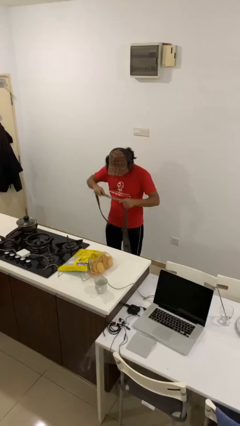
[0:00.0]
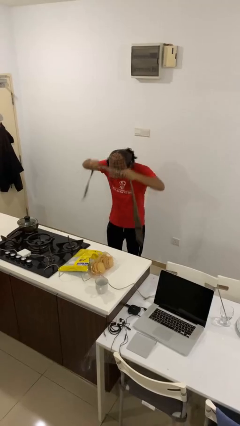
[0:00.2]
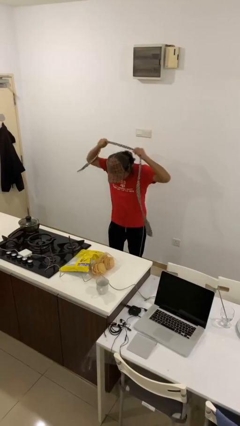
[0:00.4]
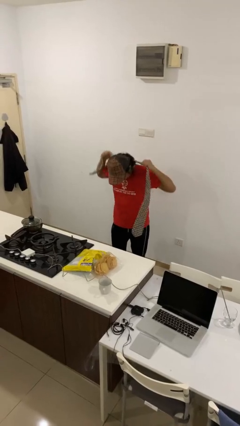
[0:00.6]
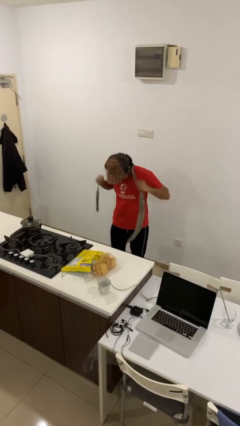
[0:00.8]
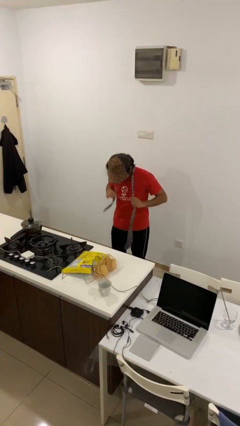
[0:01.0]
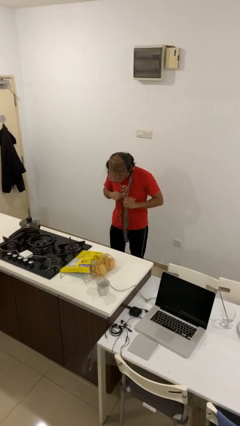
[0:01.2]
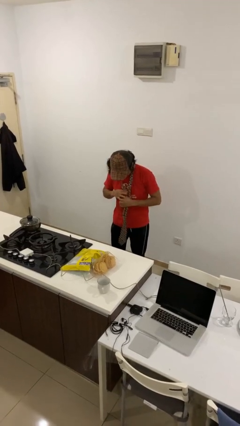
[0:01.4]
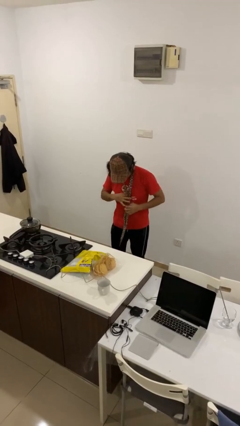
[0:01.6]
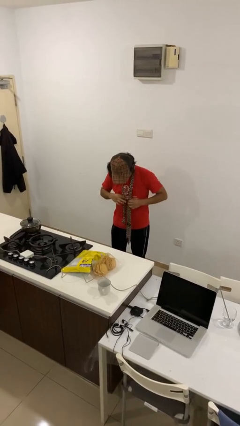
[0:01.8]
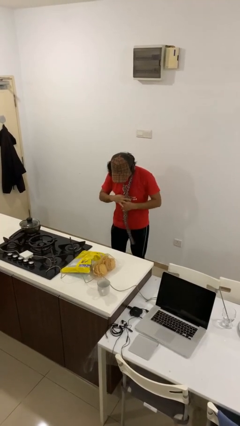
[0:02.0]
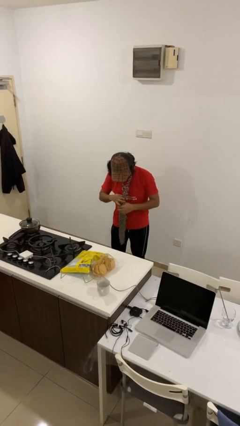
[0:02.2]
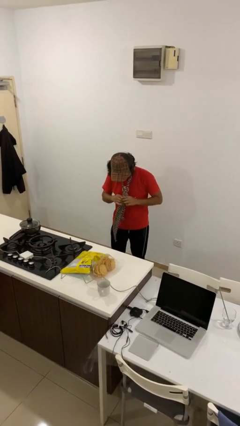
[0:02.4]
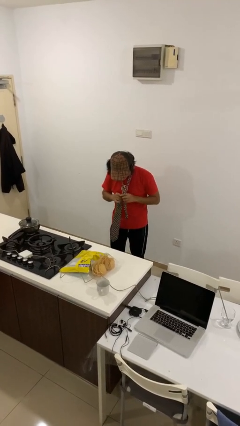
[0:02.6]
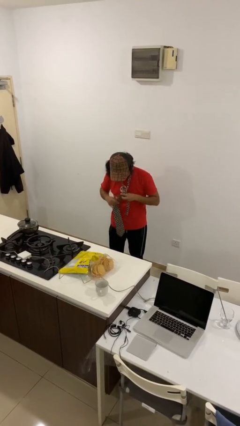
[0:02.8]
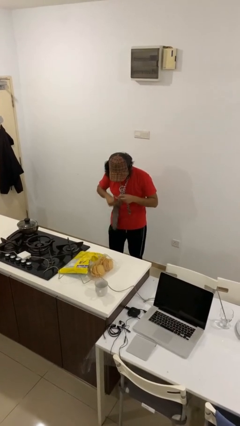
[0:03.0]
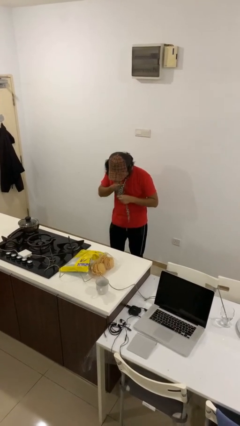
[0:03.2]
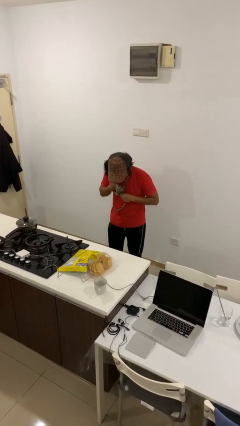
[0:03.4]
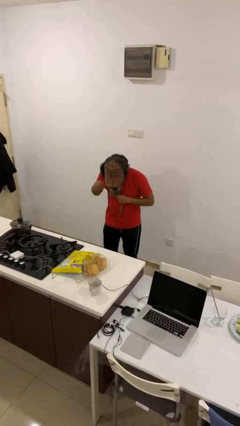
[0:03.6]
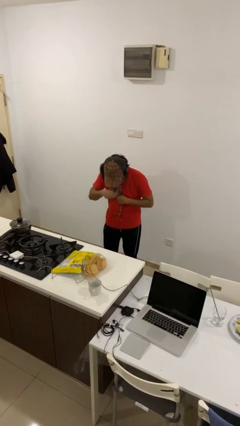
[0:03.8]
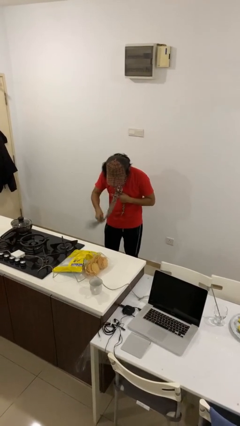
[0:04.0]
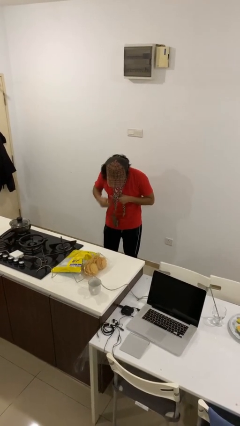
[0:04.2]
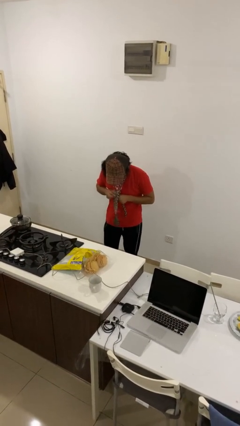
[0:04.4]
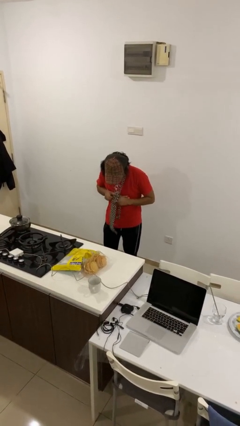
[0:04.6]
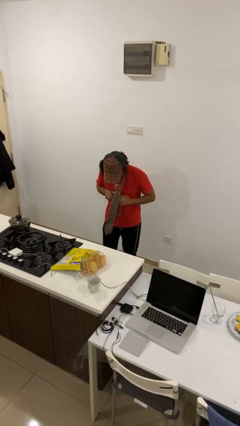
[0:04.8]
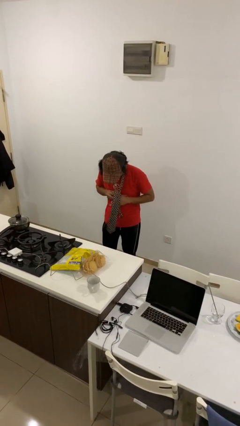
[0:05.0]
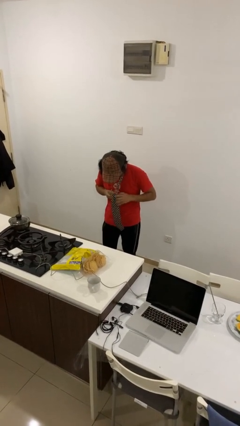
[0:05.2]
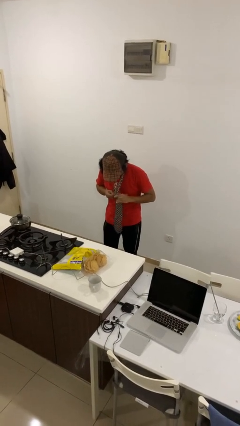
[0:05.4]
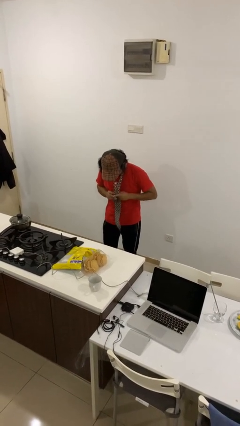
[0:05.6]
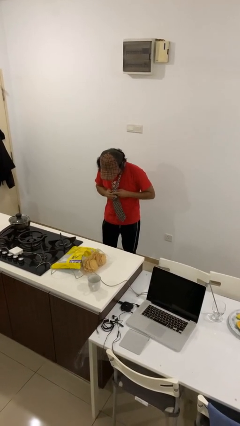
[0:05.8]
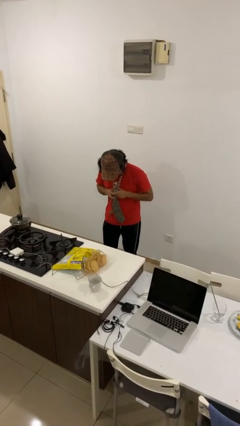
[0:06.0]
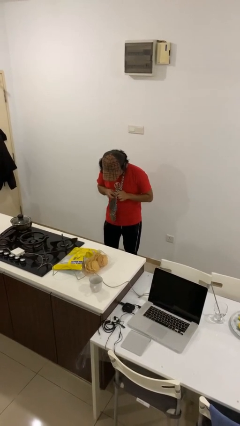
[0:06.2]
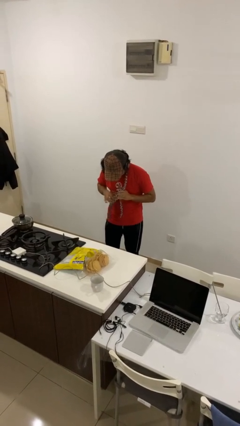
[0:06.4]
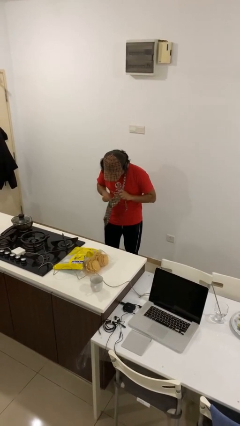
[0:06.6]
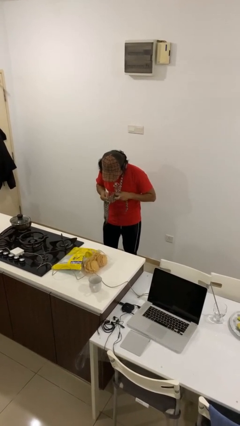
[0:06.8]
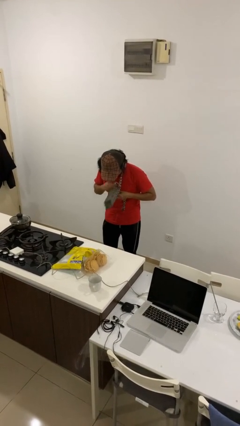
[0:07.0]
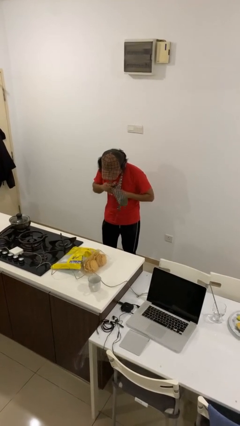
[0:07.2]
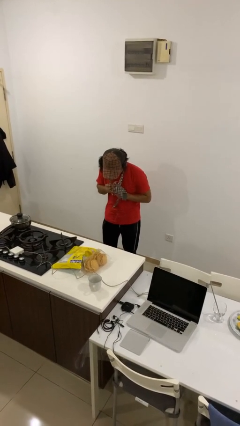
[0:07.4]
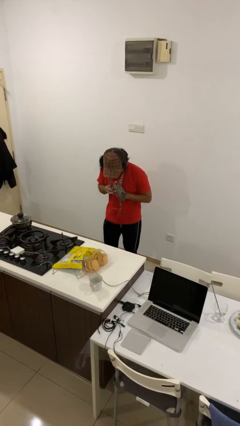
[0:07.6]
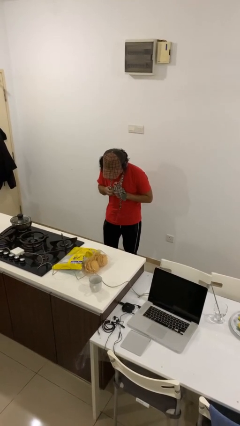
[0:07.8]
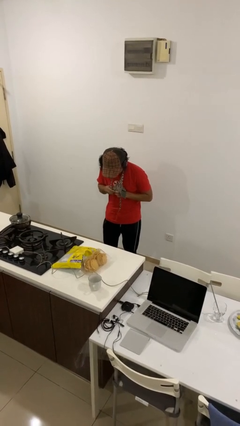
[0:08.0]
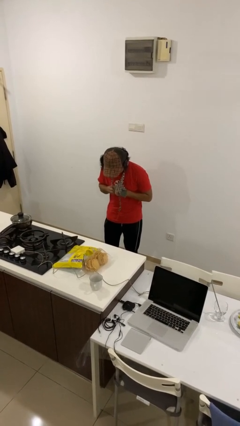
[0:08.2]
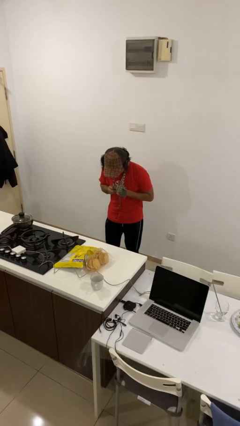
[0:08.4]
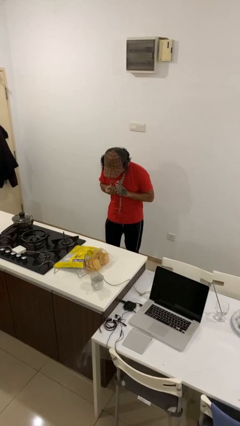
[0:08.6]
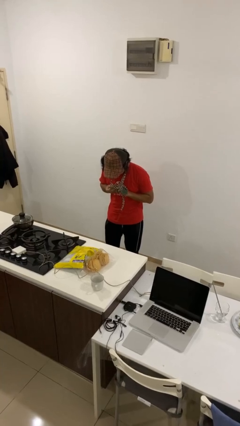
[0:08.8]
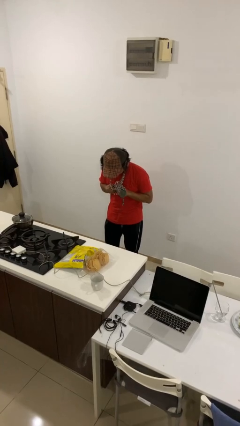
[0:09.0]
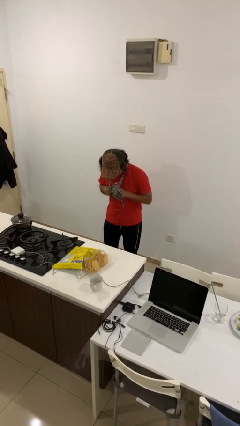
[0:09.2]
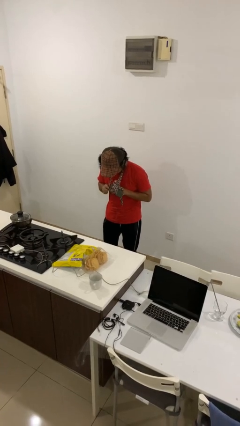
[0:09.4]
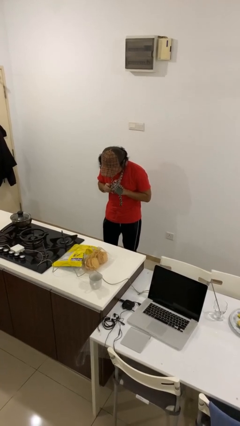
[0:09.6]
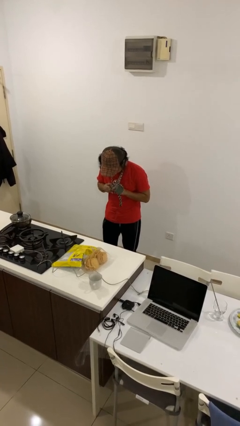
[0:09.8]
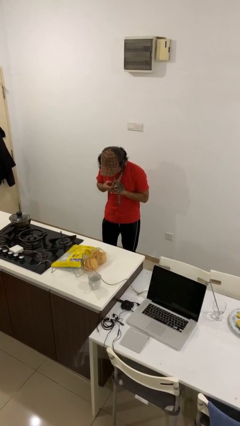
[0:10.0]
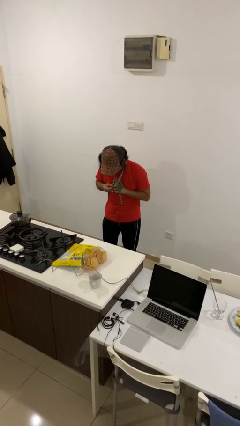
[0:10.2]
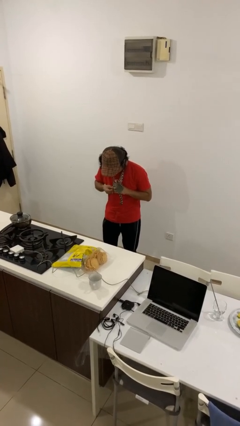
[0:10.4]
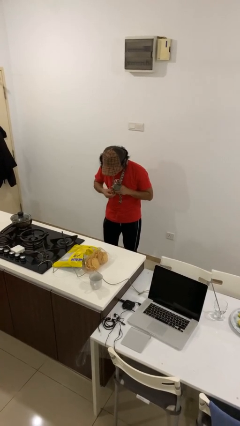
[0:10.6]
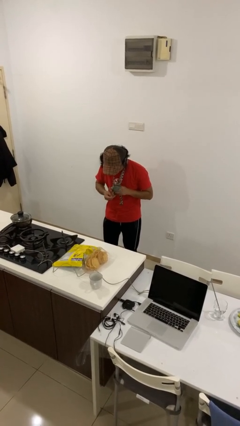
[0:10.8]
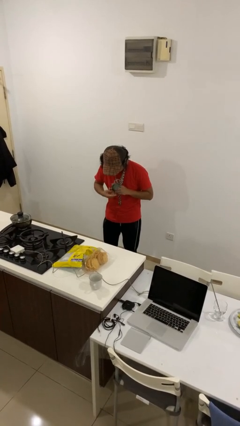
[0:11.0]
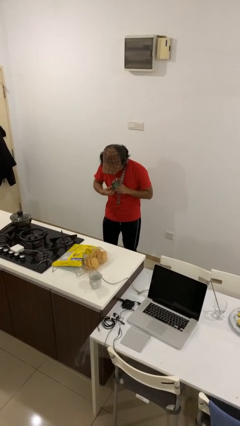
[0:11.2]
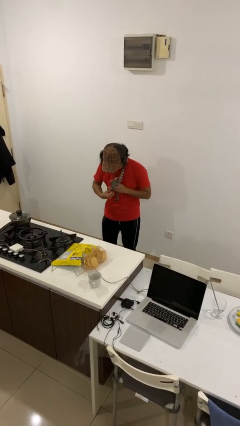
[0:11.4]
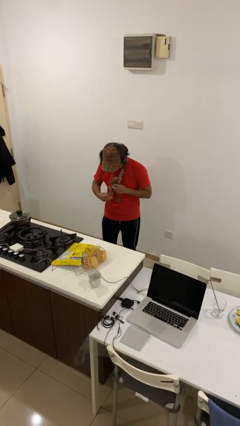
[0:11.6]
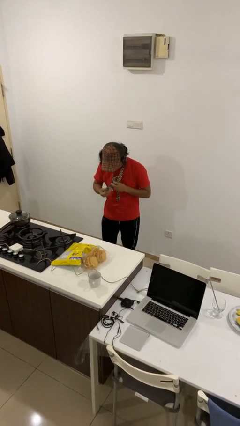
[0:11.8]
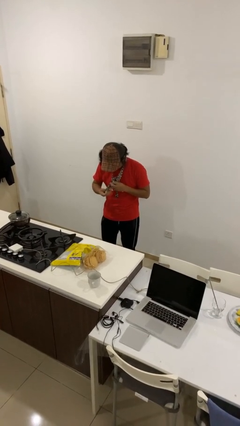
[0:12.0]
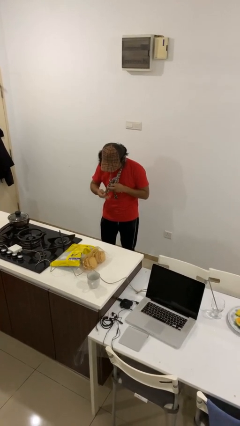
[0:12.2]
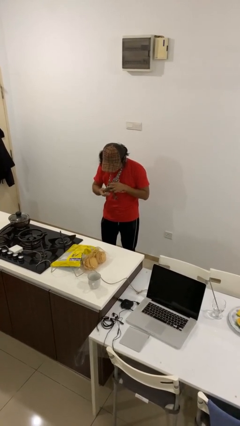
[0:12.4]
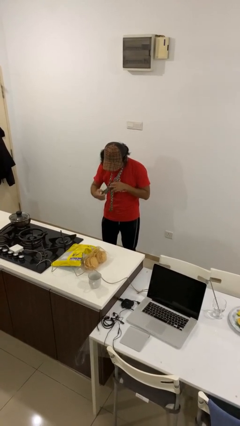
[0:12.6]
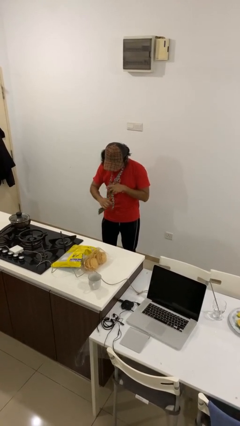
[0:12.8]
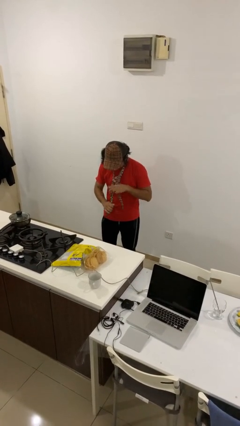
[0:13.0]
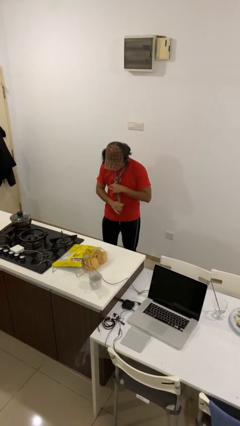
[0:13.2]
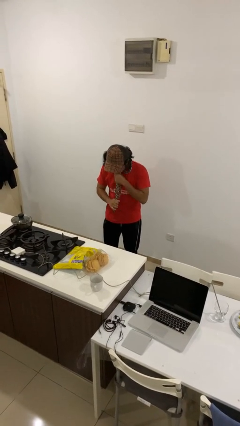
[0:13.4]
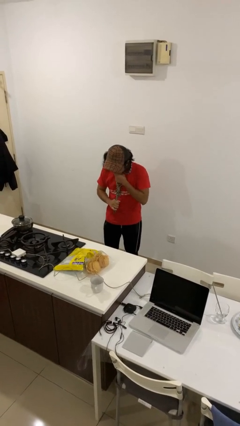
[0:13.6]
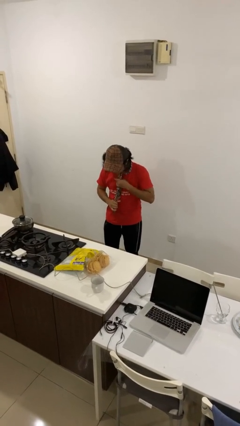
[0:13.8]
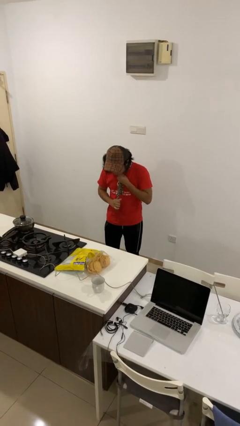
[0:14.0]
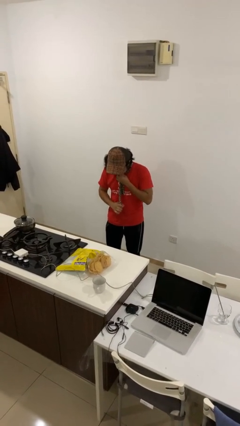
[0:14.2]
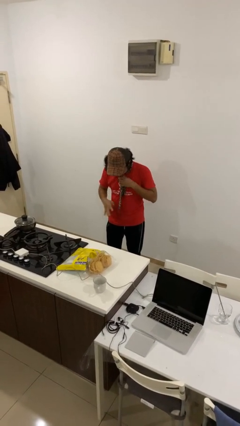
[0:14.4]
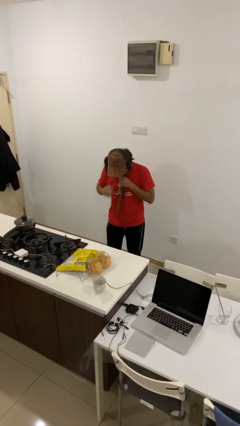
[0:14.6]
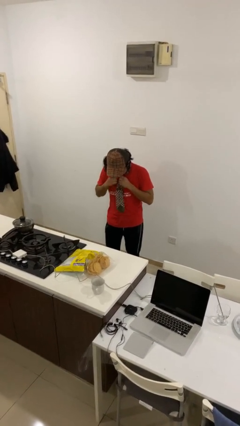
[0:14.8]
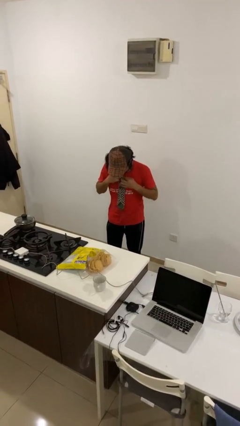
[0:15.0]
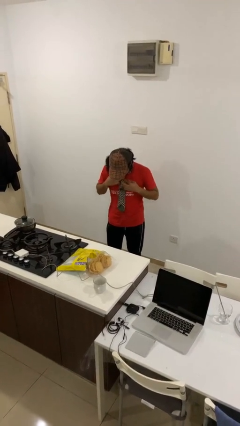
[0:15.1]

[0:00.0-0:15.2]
person puts on necktie

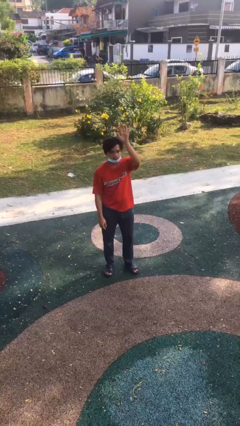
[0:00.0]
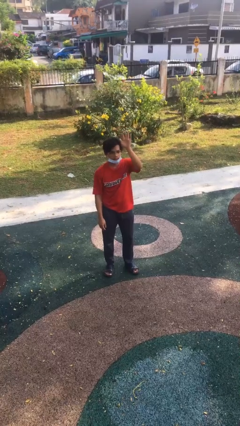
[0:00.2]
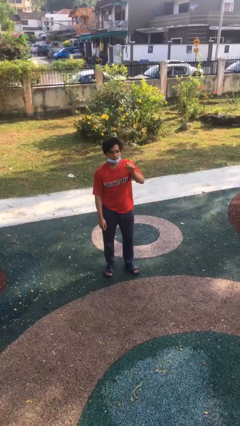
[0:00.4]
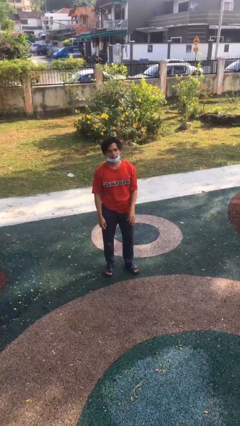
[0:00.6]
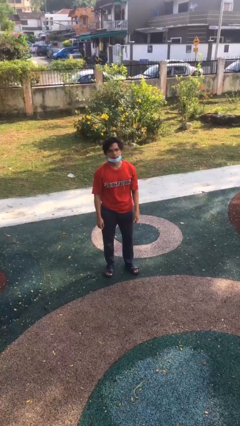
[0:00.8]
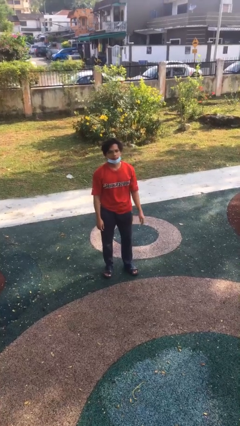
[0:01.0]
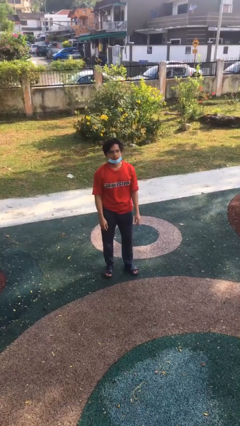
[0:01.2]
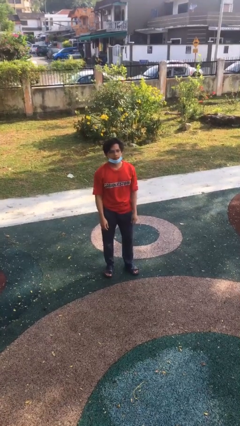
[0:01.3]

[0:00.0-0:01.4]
person gestures lower hand

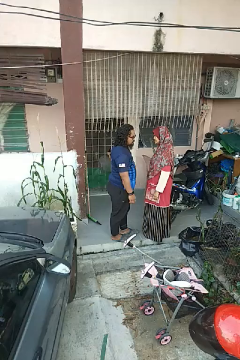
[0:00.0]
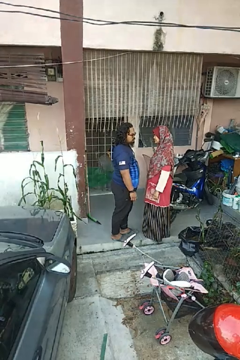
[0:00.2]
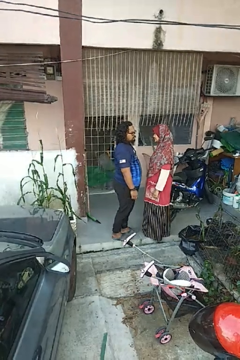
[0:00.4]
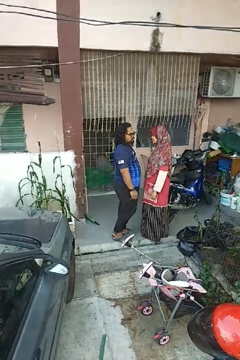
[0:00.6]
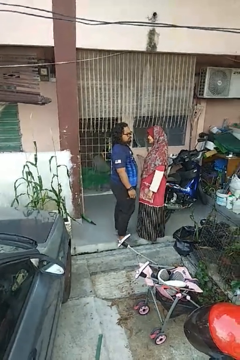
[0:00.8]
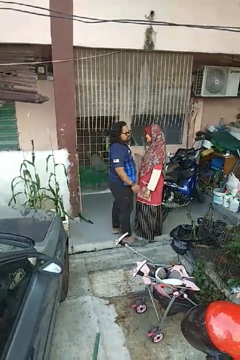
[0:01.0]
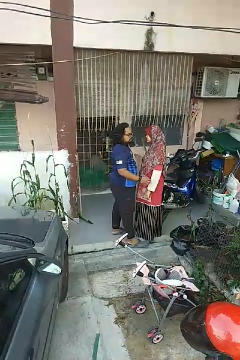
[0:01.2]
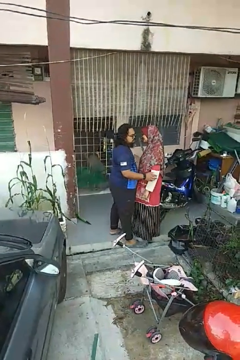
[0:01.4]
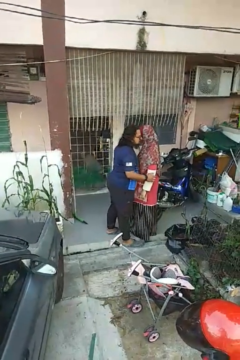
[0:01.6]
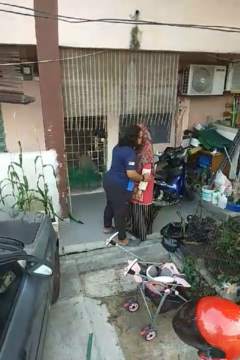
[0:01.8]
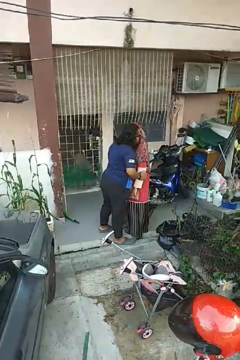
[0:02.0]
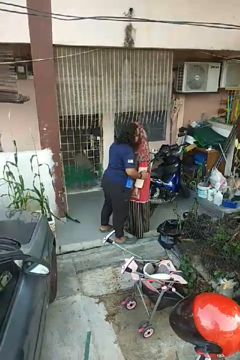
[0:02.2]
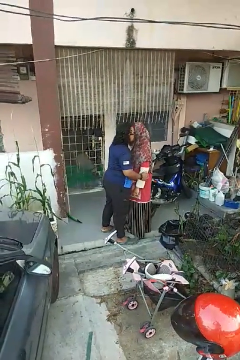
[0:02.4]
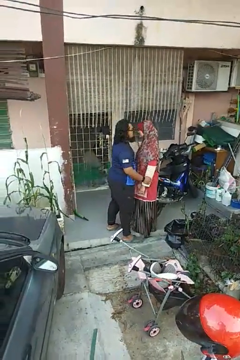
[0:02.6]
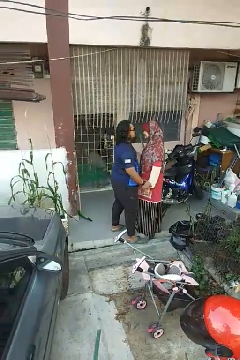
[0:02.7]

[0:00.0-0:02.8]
person kisses cheek of person
